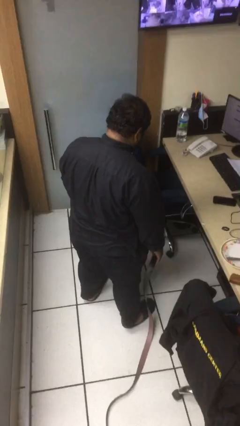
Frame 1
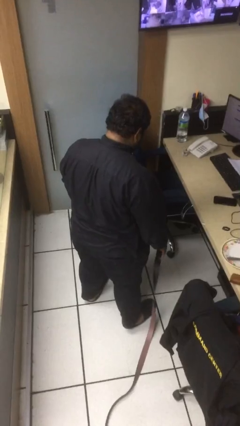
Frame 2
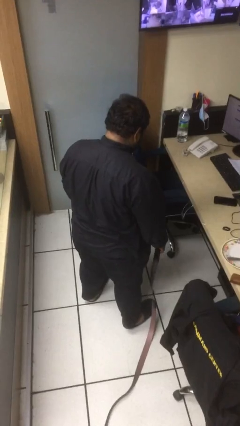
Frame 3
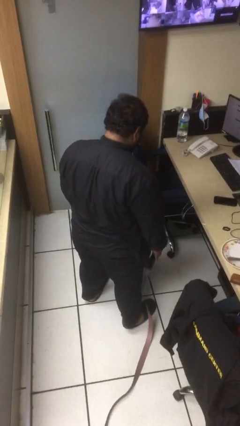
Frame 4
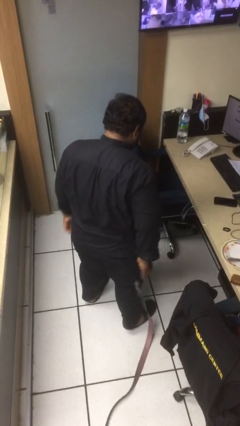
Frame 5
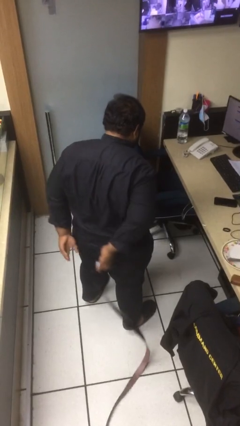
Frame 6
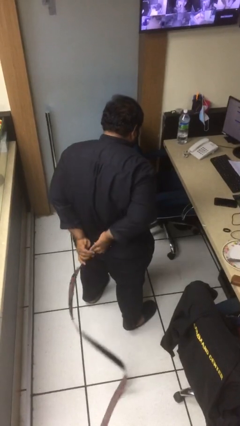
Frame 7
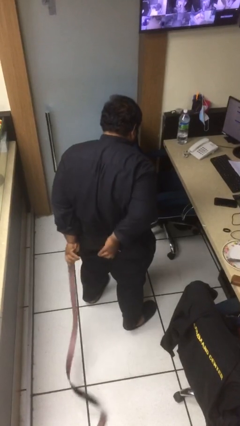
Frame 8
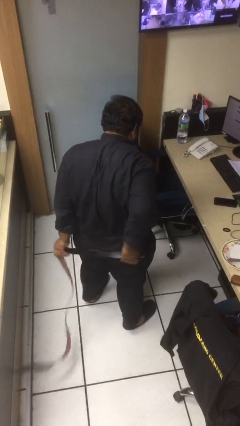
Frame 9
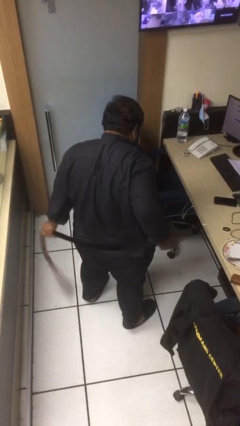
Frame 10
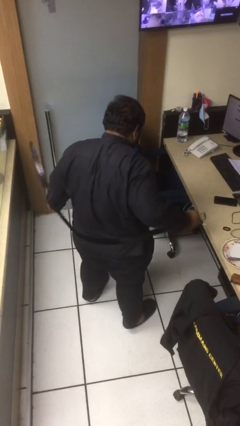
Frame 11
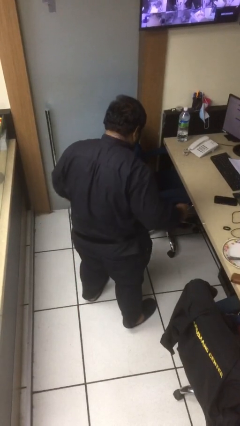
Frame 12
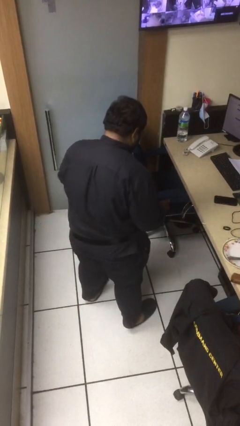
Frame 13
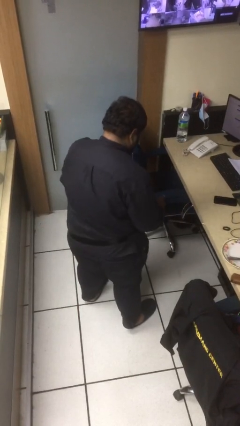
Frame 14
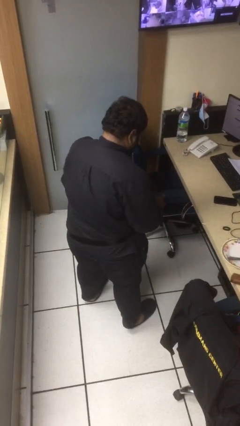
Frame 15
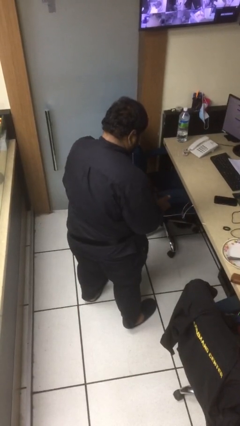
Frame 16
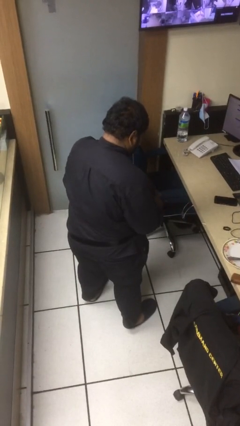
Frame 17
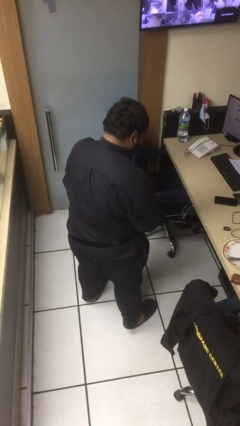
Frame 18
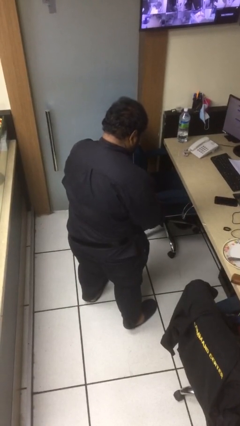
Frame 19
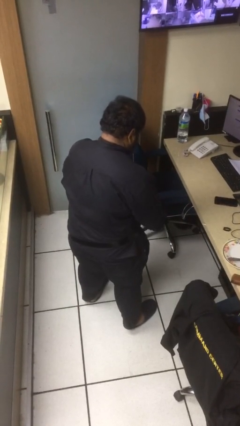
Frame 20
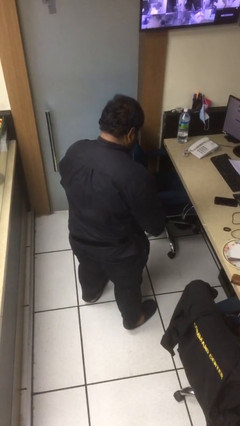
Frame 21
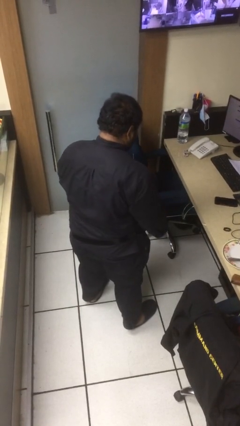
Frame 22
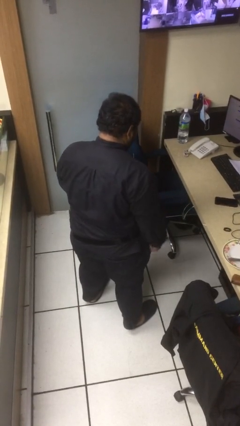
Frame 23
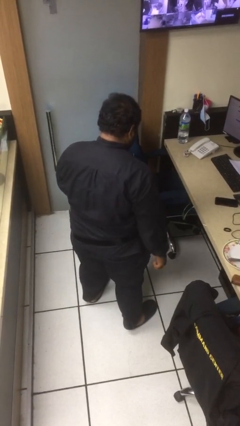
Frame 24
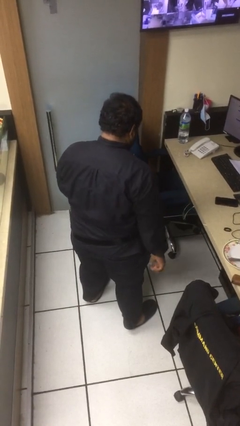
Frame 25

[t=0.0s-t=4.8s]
person puts on belt

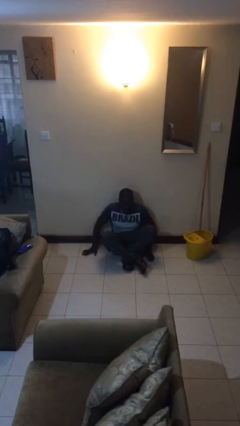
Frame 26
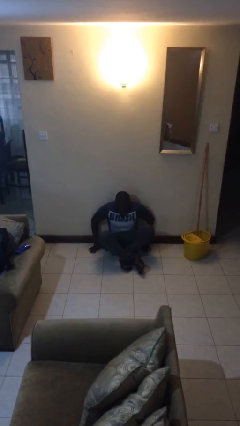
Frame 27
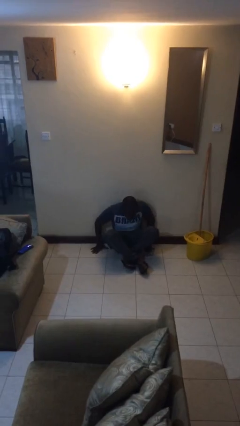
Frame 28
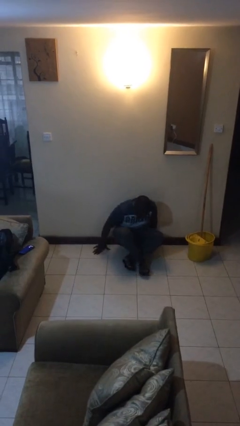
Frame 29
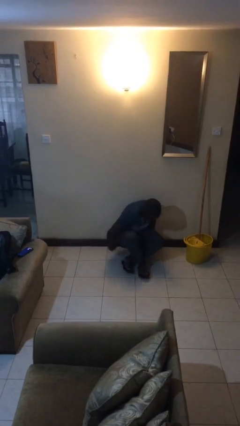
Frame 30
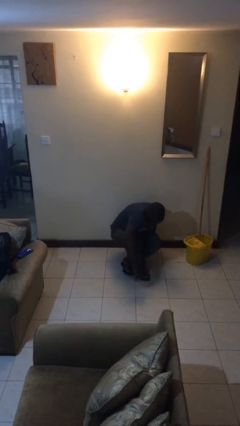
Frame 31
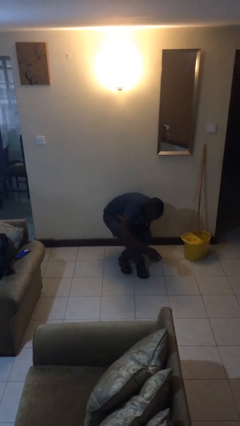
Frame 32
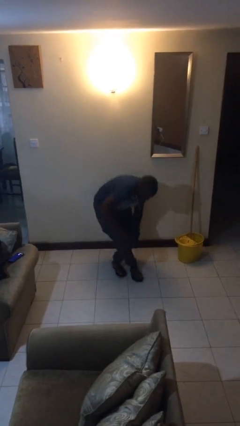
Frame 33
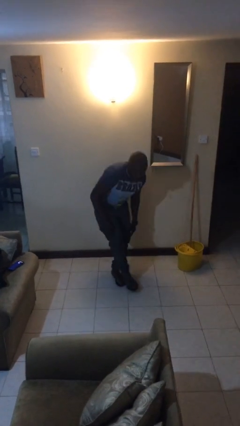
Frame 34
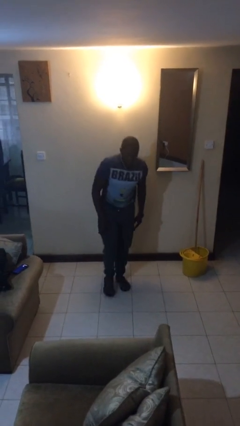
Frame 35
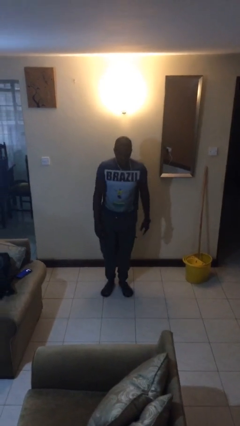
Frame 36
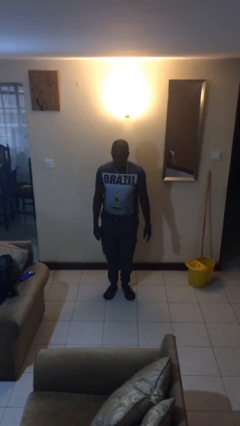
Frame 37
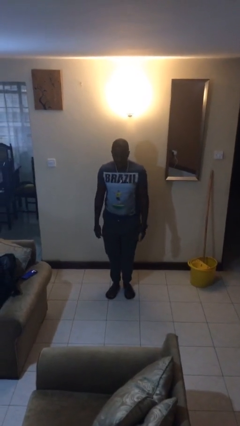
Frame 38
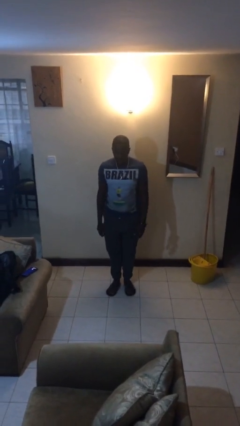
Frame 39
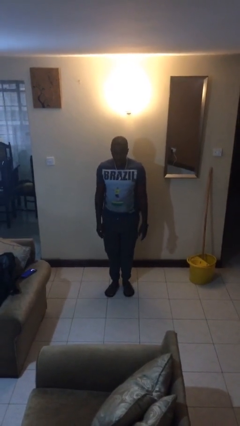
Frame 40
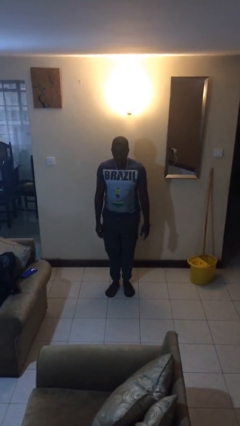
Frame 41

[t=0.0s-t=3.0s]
person stands up from floor

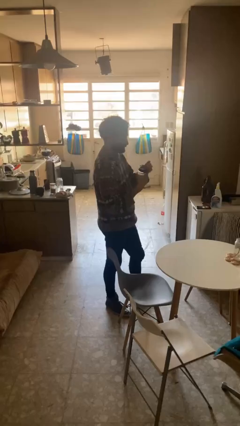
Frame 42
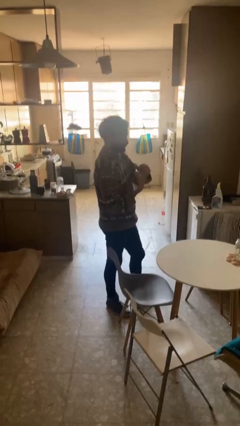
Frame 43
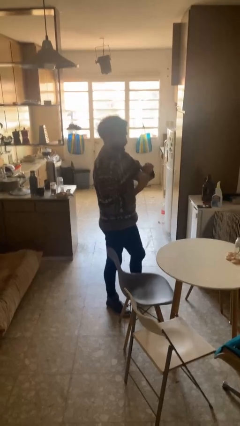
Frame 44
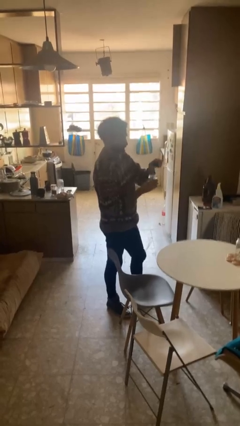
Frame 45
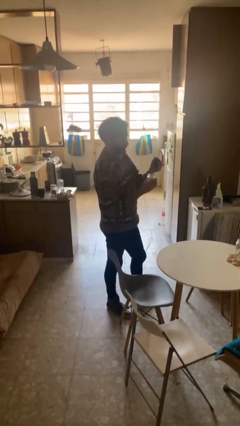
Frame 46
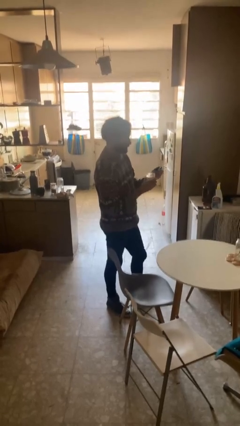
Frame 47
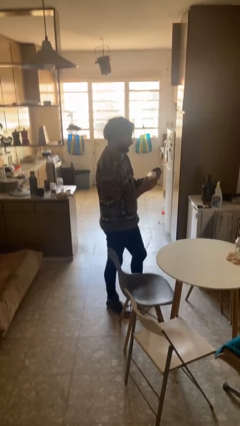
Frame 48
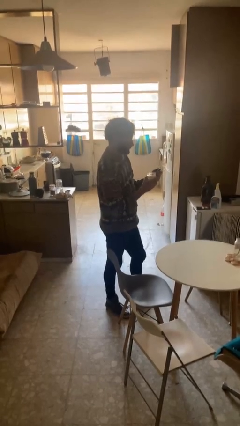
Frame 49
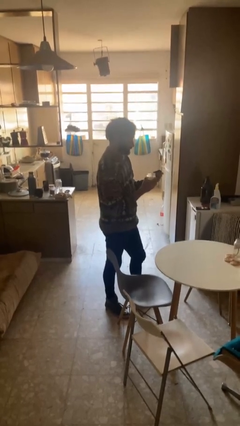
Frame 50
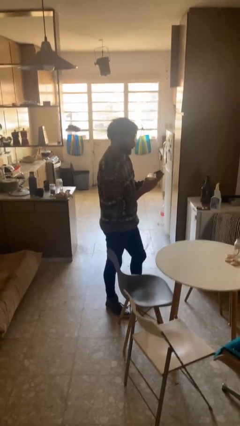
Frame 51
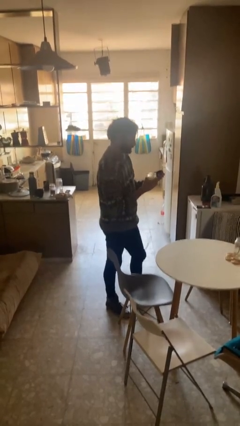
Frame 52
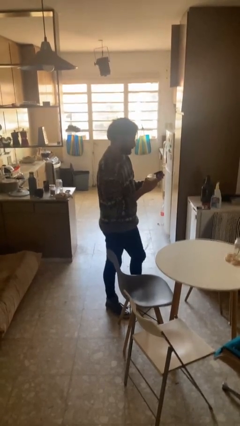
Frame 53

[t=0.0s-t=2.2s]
person opens jar

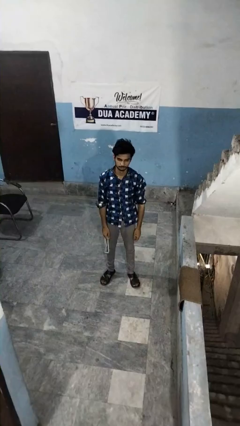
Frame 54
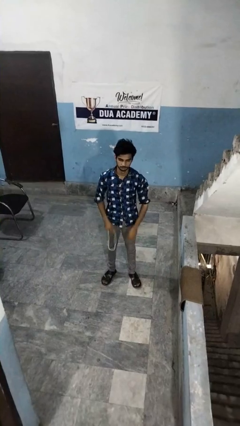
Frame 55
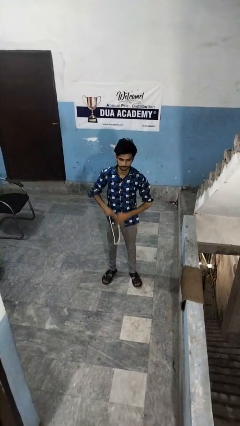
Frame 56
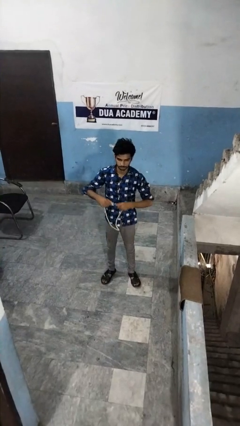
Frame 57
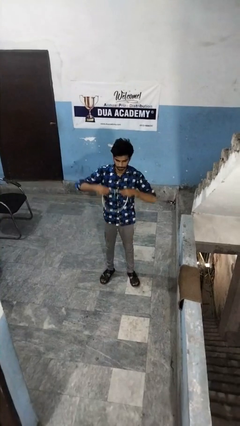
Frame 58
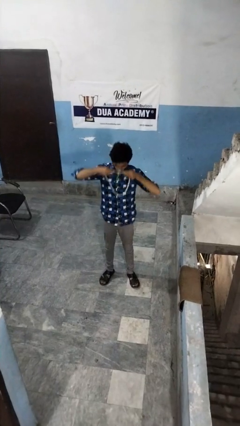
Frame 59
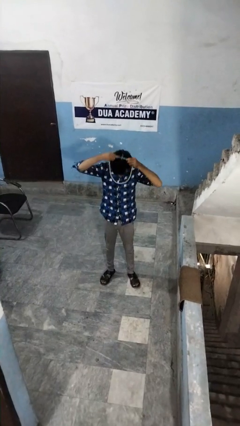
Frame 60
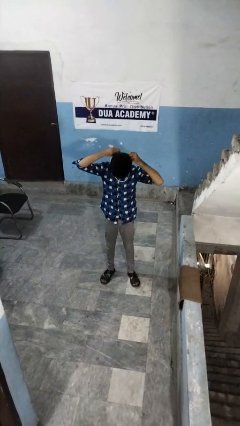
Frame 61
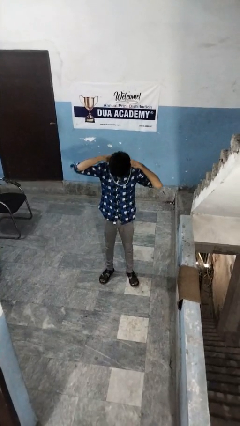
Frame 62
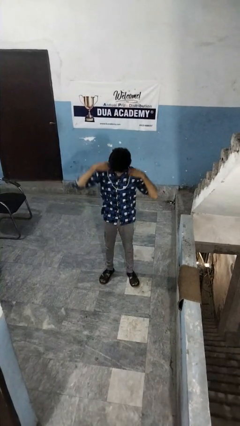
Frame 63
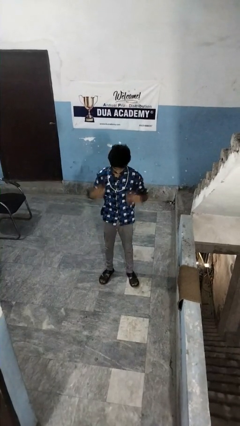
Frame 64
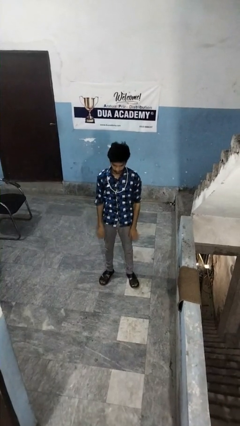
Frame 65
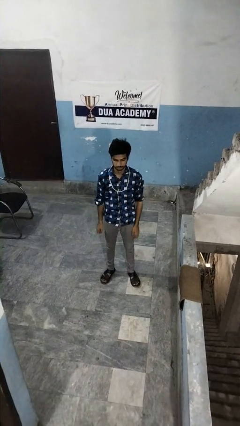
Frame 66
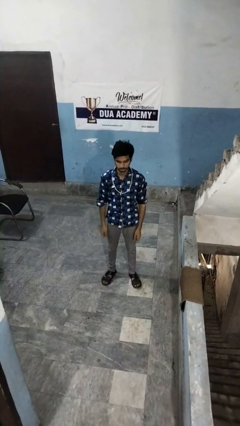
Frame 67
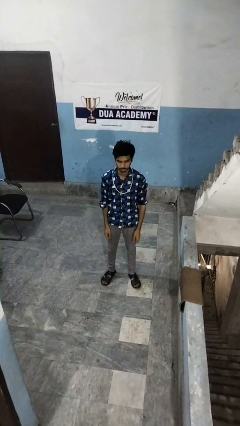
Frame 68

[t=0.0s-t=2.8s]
person puts on necklace

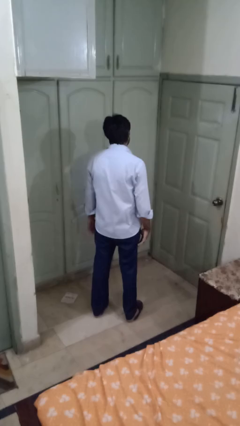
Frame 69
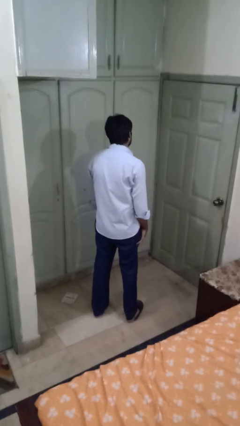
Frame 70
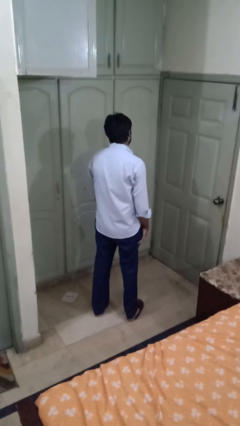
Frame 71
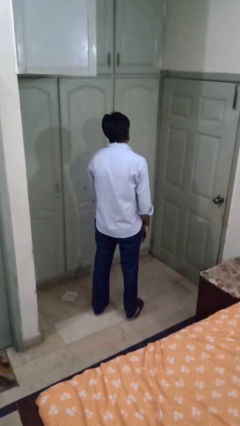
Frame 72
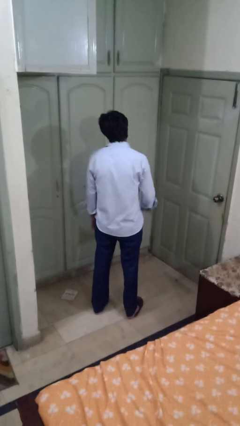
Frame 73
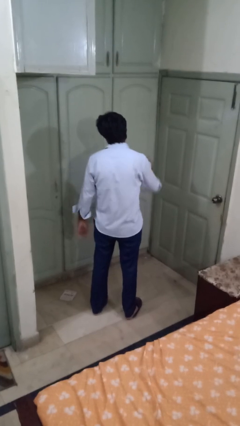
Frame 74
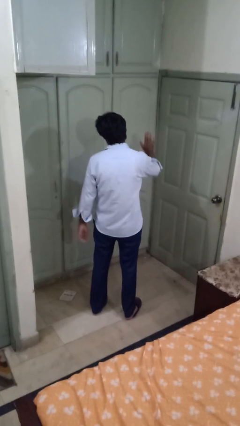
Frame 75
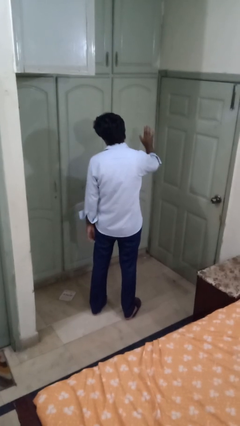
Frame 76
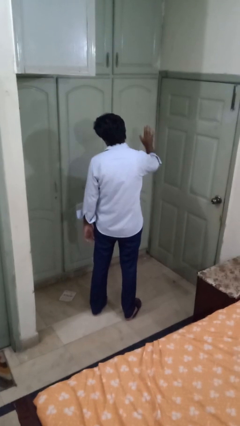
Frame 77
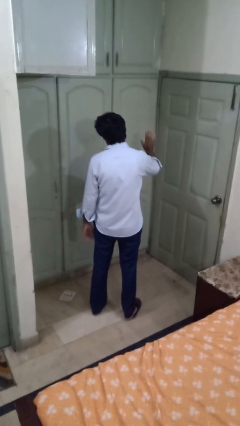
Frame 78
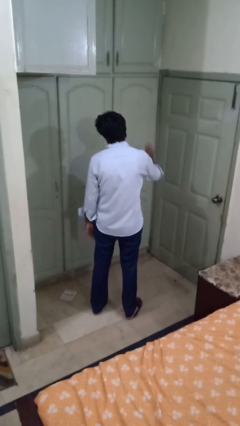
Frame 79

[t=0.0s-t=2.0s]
person gestures stop

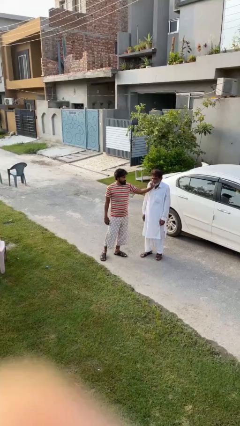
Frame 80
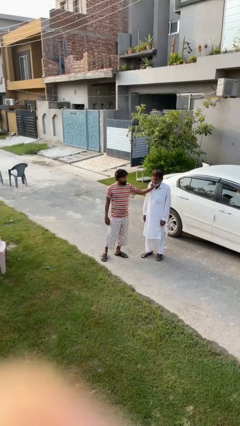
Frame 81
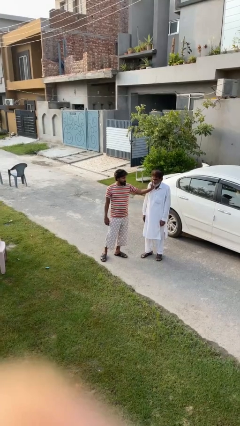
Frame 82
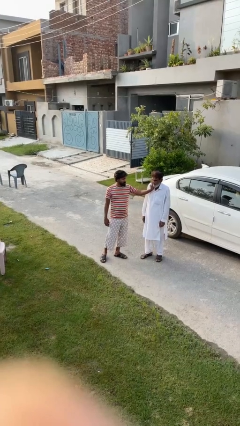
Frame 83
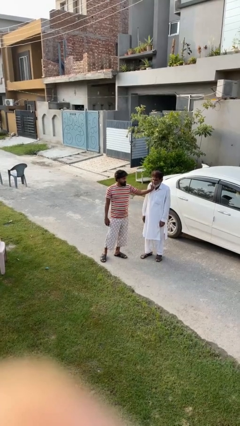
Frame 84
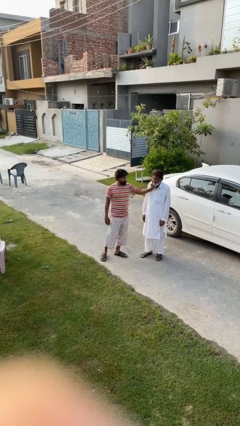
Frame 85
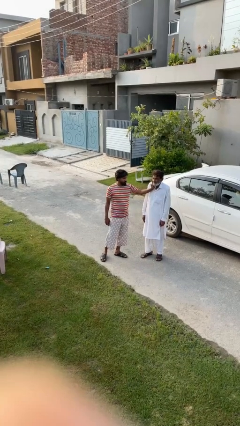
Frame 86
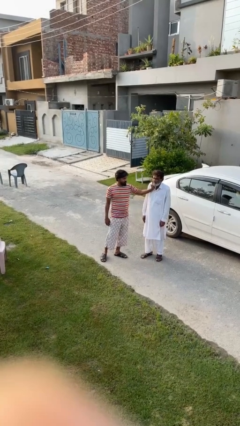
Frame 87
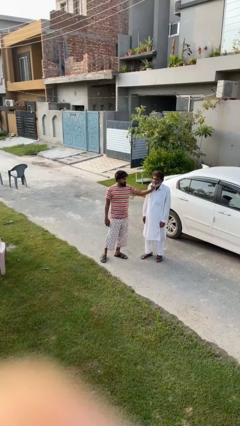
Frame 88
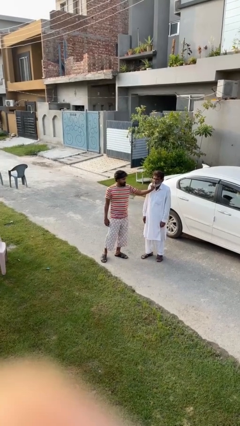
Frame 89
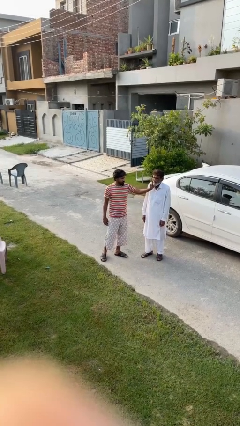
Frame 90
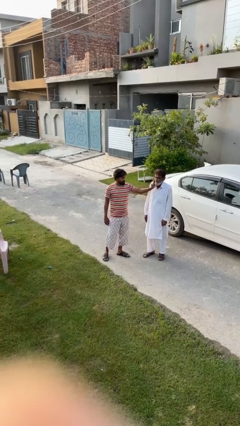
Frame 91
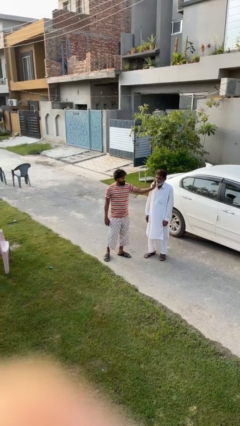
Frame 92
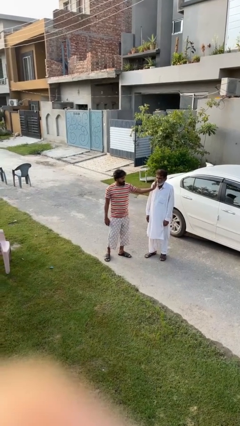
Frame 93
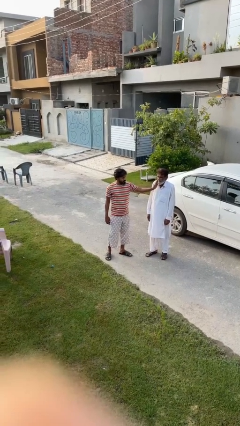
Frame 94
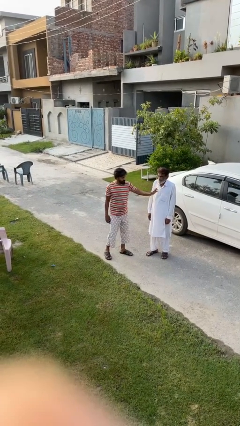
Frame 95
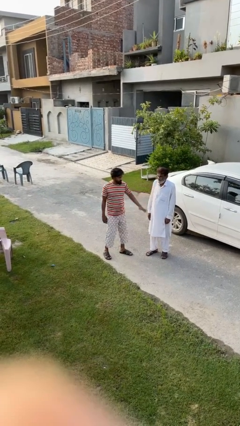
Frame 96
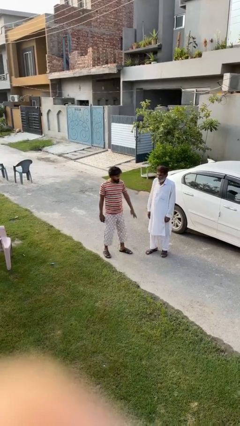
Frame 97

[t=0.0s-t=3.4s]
person touches face of person
